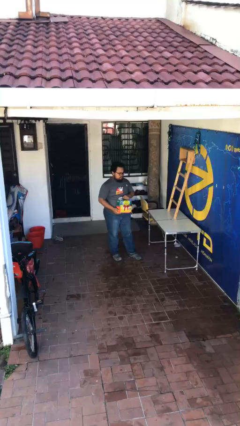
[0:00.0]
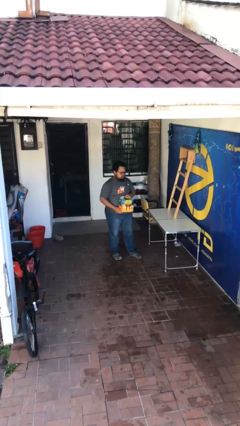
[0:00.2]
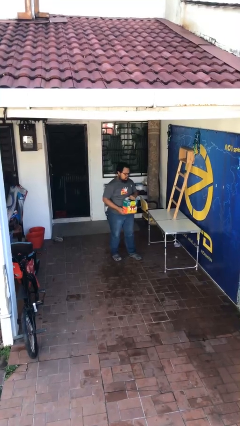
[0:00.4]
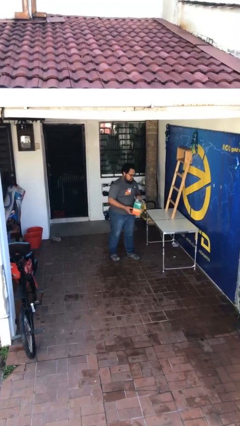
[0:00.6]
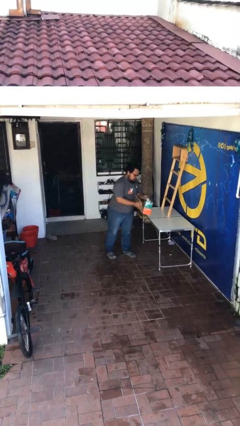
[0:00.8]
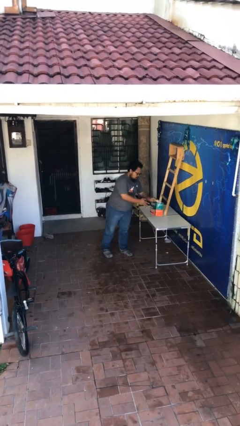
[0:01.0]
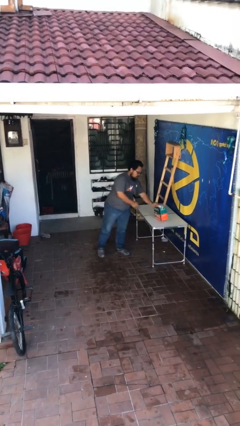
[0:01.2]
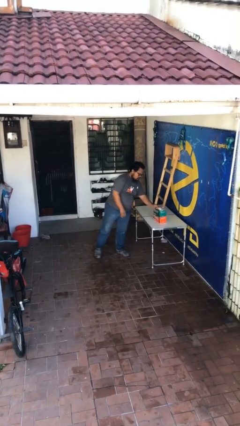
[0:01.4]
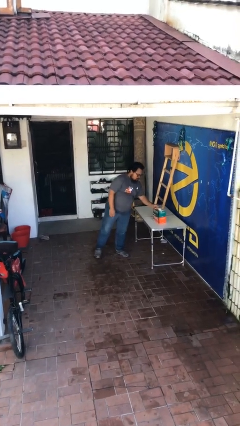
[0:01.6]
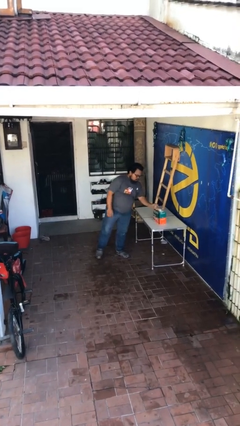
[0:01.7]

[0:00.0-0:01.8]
person puts down object on table

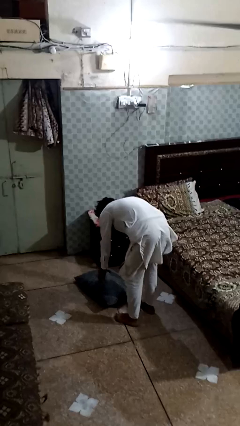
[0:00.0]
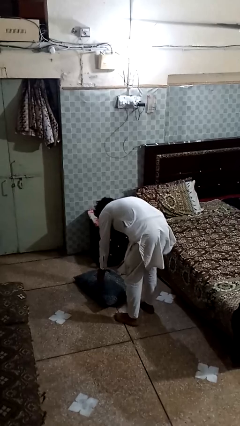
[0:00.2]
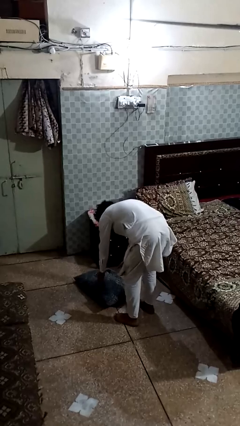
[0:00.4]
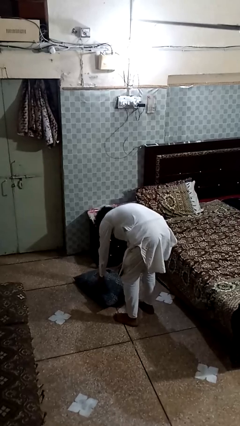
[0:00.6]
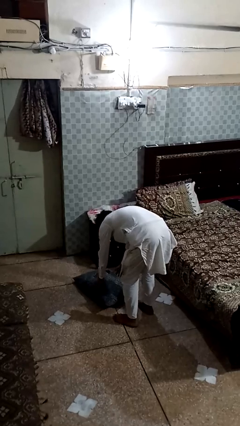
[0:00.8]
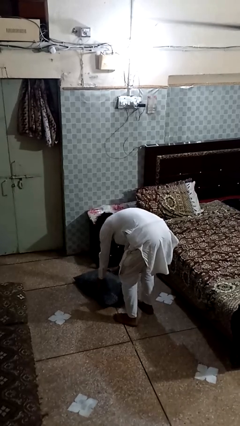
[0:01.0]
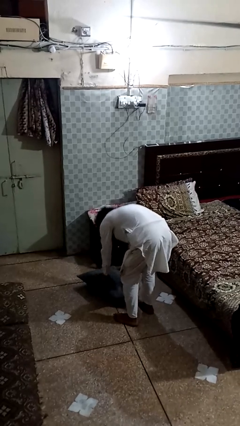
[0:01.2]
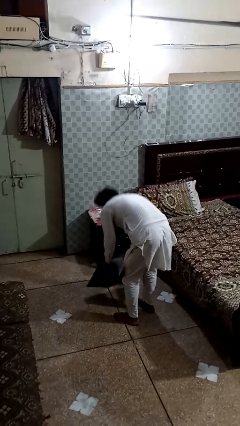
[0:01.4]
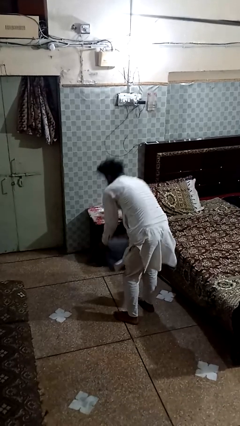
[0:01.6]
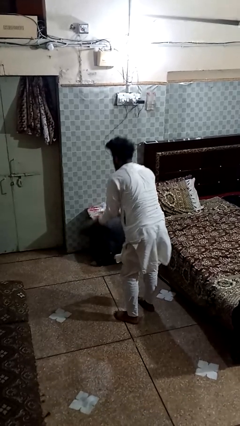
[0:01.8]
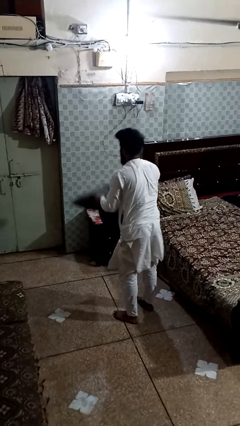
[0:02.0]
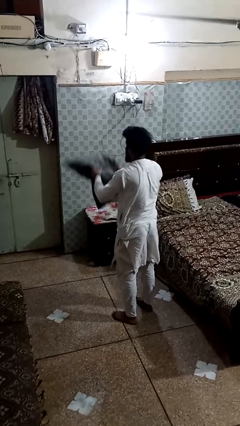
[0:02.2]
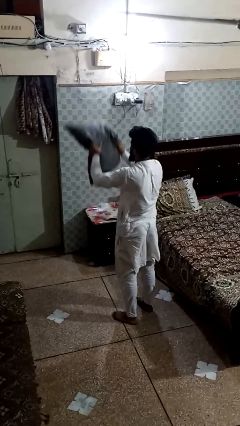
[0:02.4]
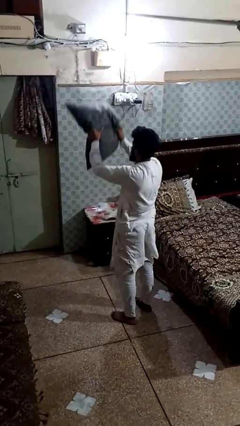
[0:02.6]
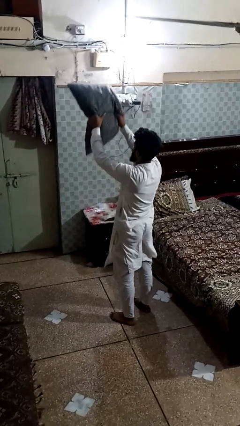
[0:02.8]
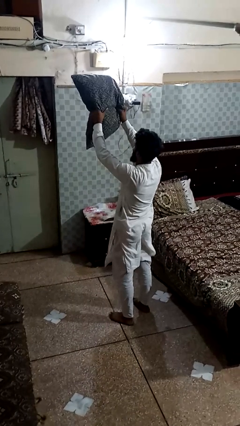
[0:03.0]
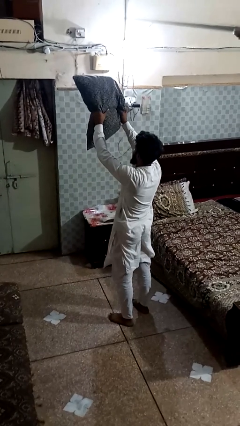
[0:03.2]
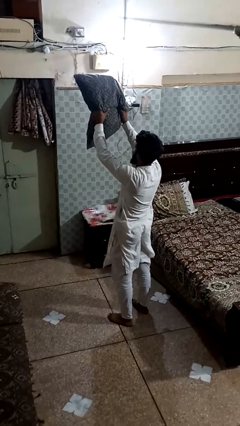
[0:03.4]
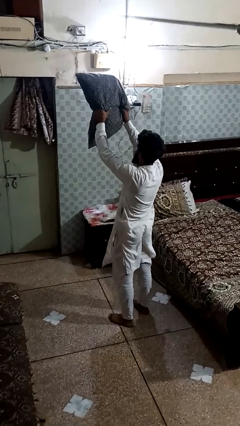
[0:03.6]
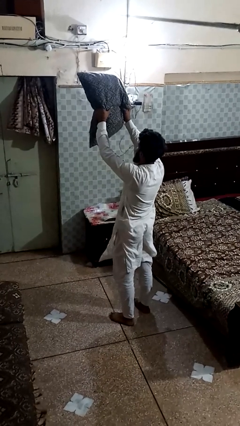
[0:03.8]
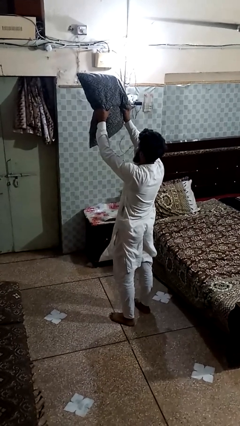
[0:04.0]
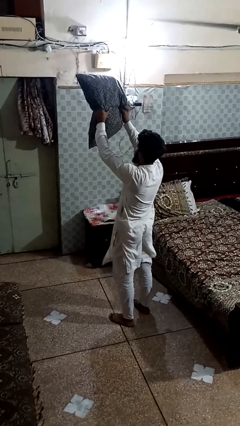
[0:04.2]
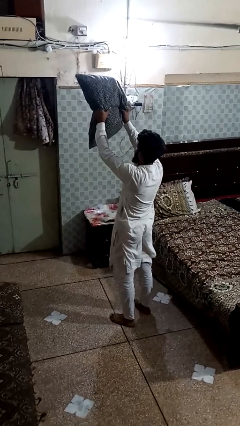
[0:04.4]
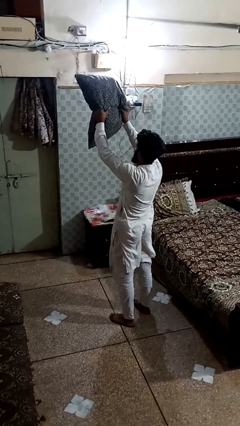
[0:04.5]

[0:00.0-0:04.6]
person picks up object from floor

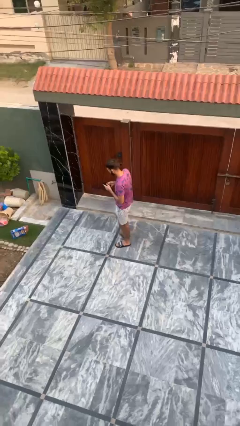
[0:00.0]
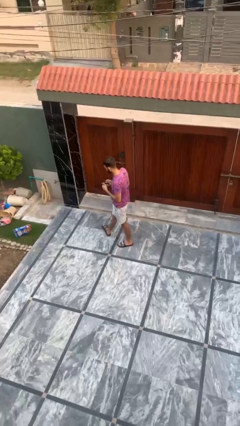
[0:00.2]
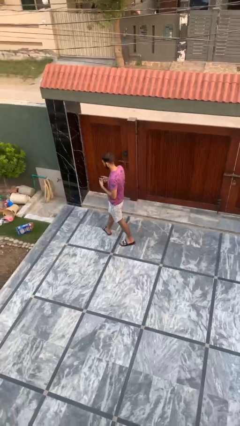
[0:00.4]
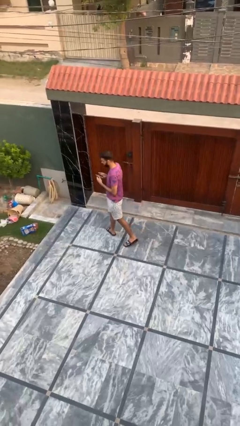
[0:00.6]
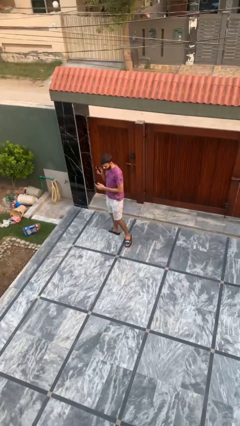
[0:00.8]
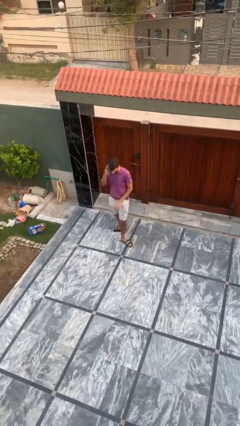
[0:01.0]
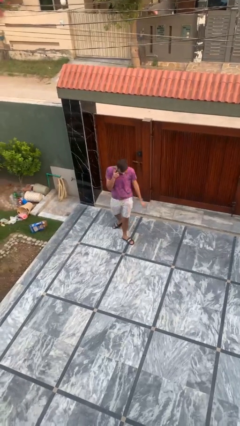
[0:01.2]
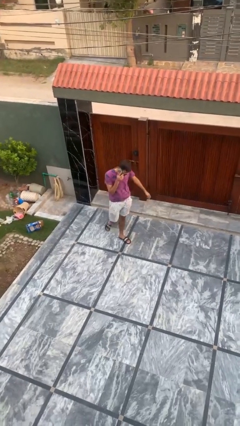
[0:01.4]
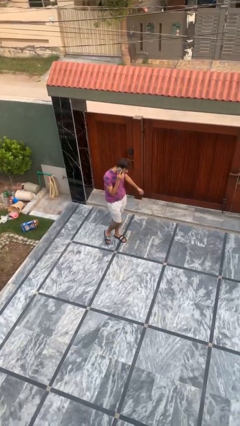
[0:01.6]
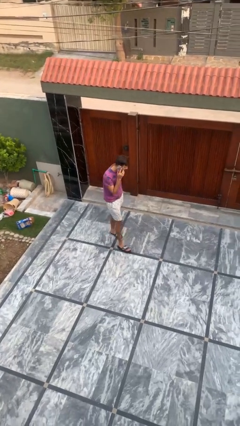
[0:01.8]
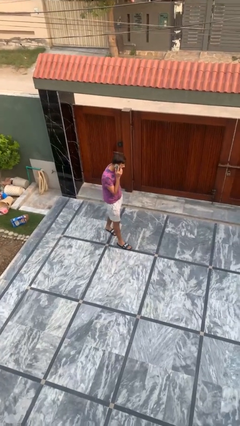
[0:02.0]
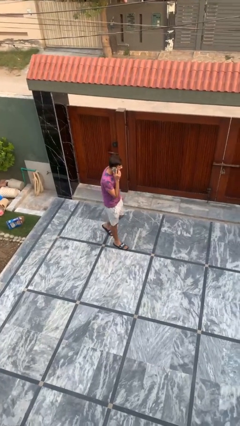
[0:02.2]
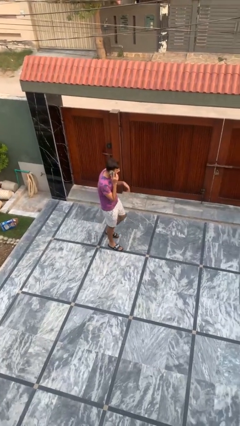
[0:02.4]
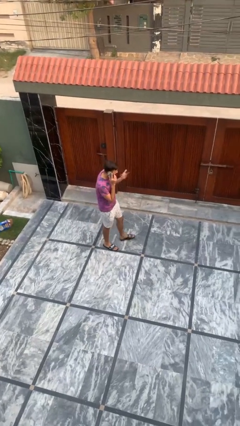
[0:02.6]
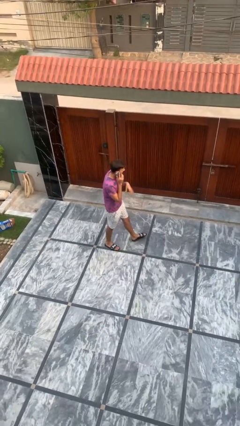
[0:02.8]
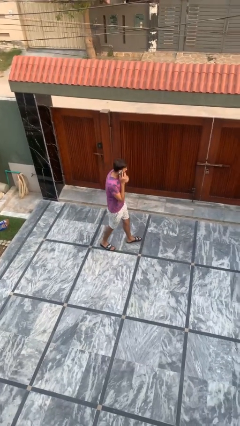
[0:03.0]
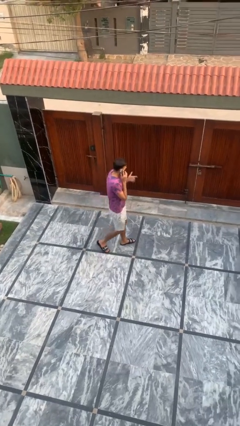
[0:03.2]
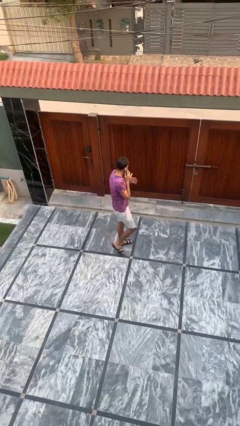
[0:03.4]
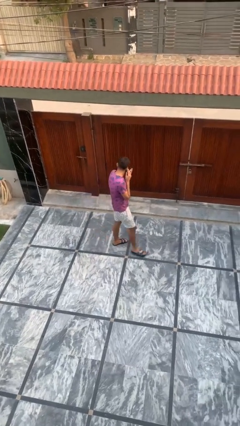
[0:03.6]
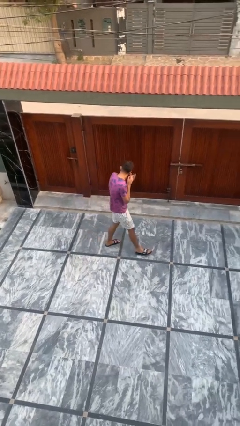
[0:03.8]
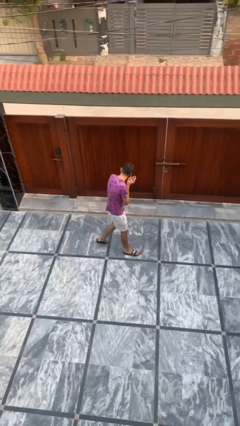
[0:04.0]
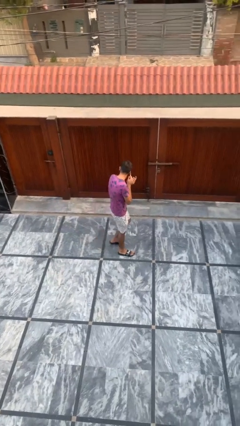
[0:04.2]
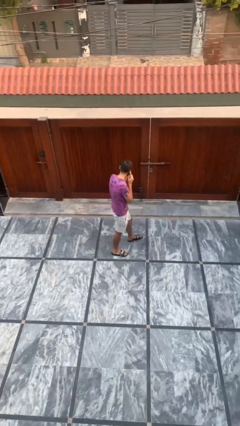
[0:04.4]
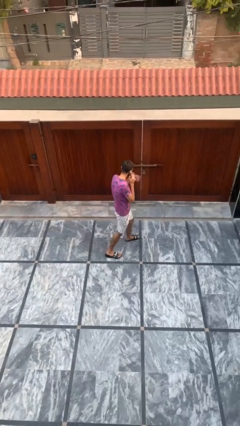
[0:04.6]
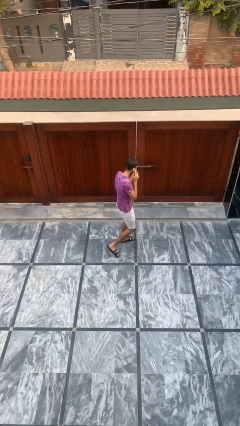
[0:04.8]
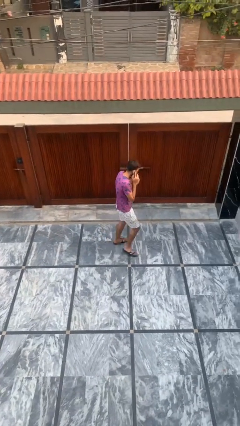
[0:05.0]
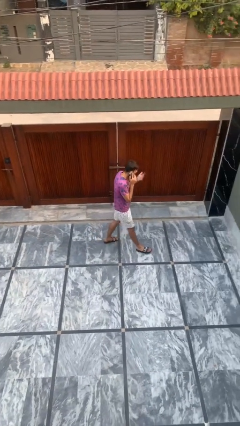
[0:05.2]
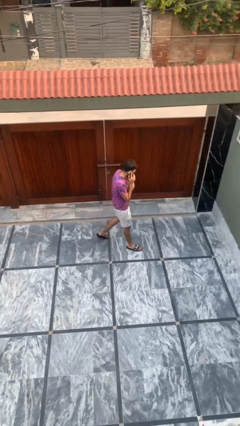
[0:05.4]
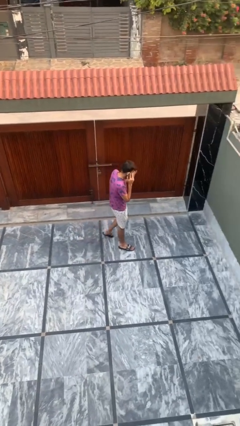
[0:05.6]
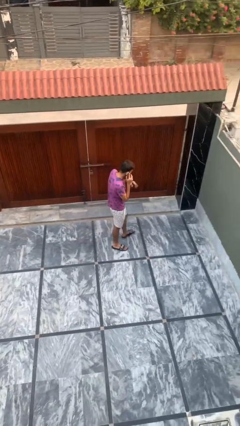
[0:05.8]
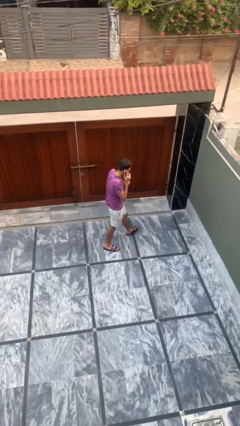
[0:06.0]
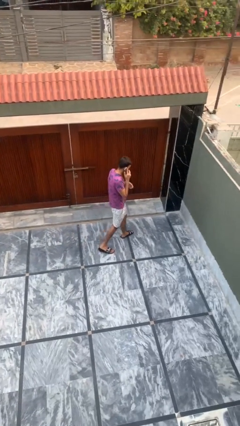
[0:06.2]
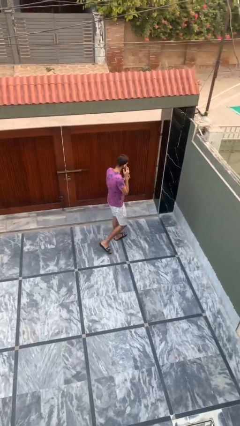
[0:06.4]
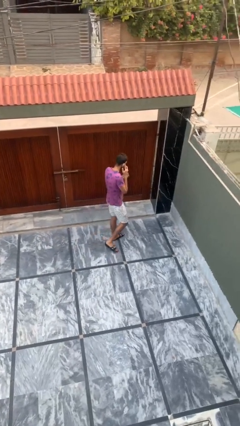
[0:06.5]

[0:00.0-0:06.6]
person talks on phone

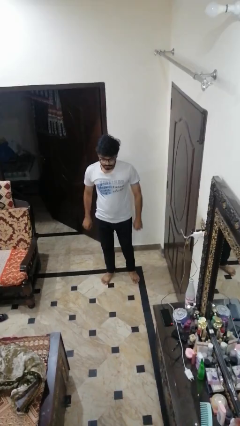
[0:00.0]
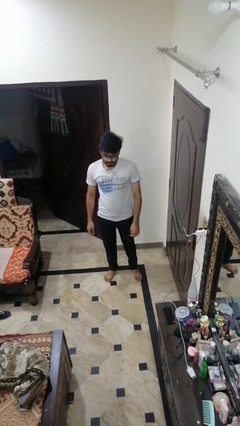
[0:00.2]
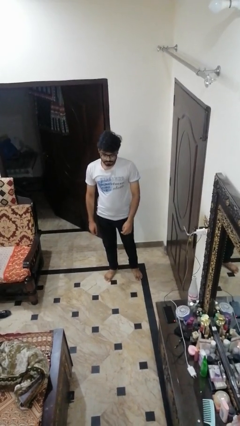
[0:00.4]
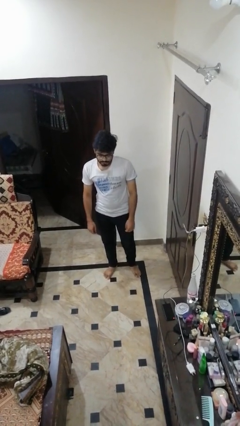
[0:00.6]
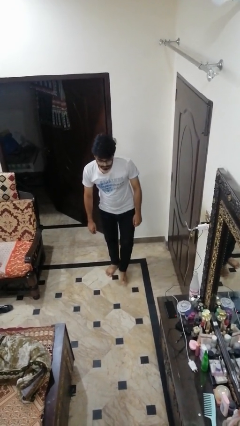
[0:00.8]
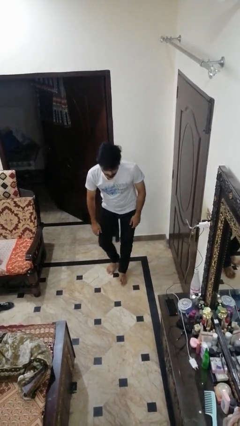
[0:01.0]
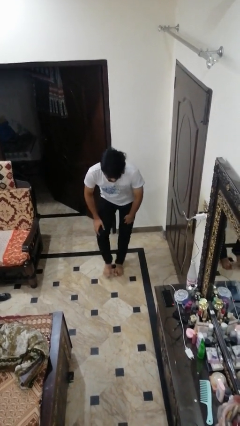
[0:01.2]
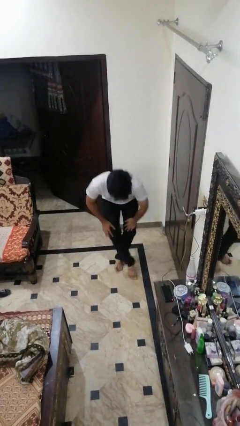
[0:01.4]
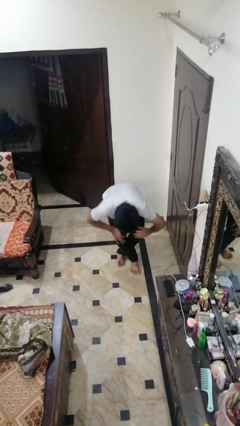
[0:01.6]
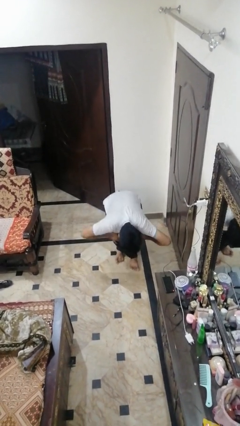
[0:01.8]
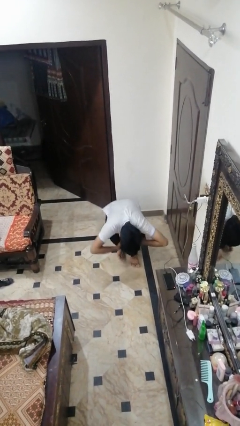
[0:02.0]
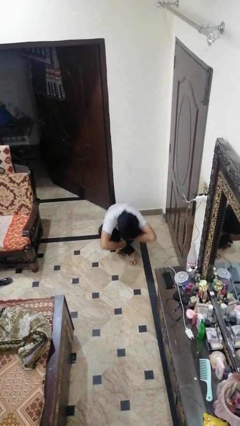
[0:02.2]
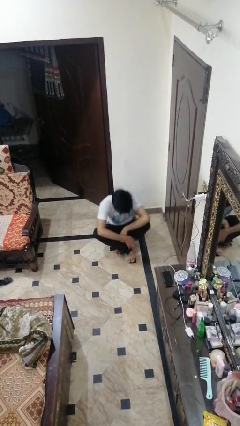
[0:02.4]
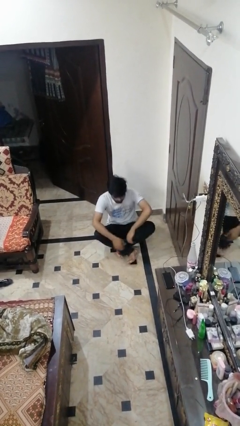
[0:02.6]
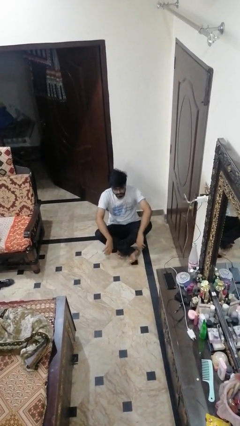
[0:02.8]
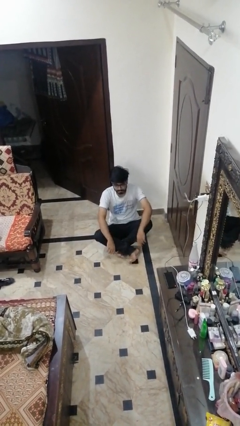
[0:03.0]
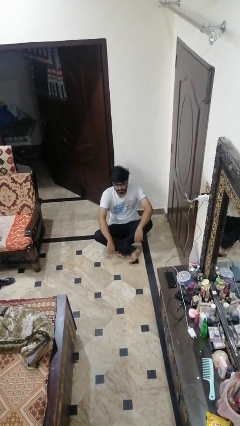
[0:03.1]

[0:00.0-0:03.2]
person sits crisscross

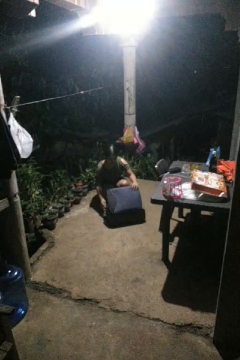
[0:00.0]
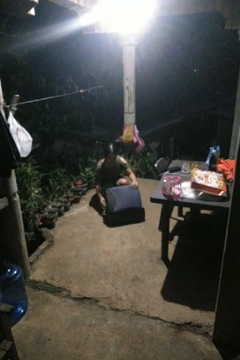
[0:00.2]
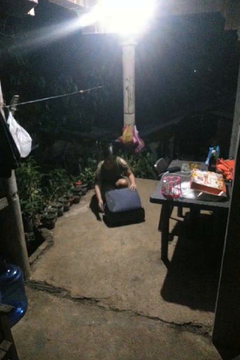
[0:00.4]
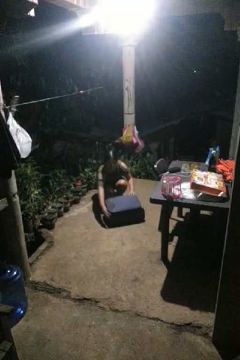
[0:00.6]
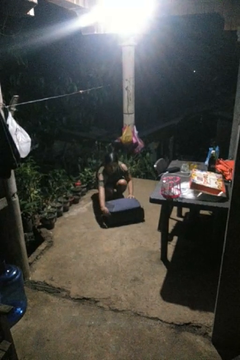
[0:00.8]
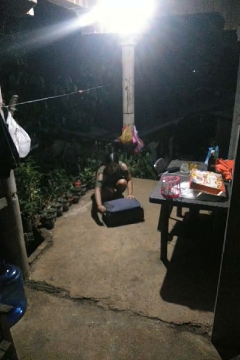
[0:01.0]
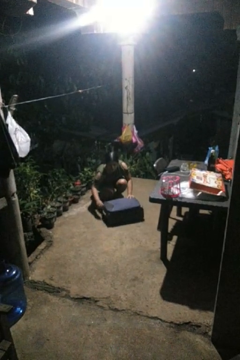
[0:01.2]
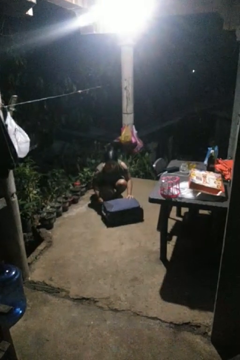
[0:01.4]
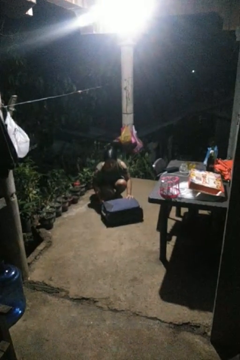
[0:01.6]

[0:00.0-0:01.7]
person closes suitcase
